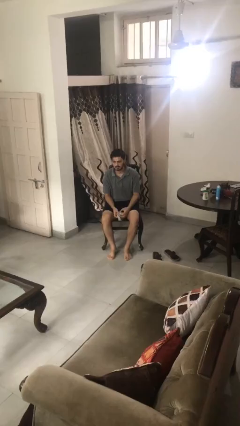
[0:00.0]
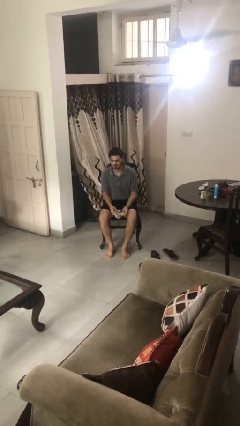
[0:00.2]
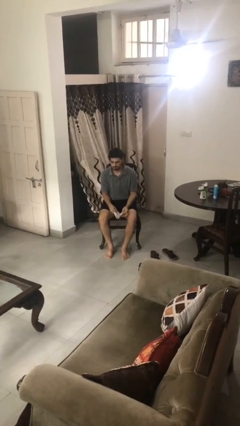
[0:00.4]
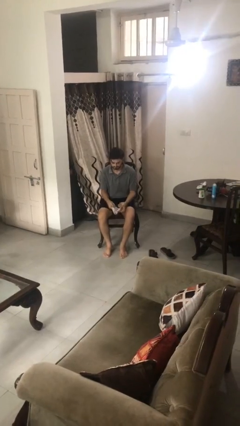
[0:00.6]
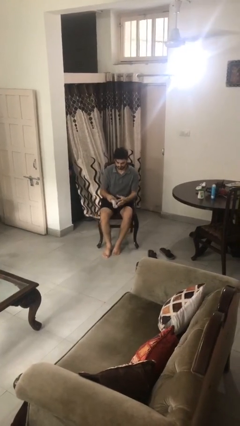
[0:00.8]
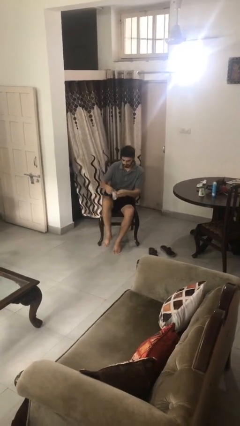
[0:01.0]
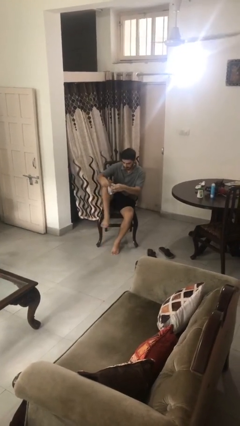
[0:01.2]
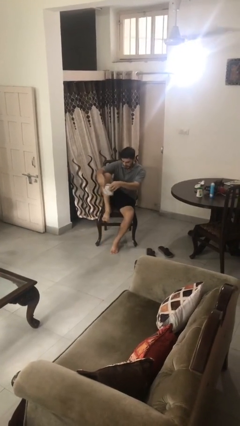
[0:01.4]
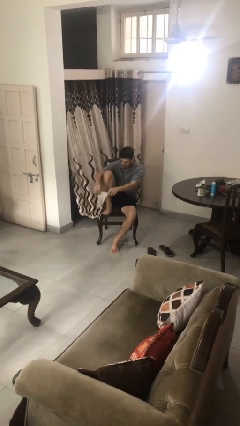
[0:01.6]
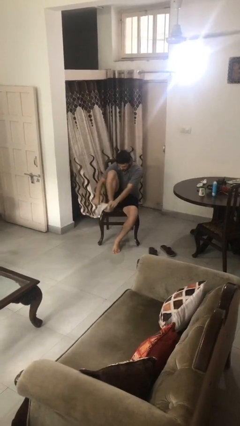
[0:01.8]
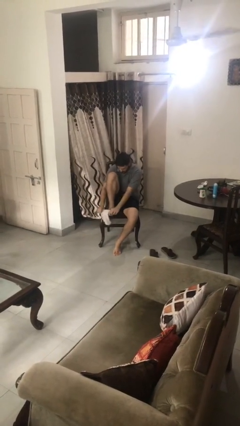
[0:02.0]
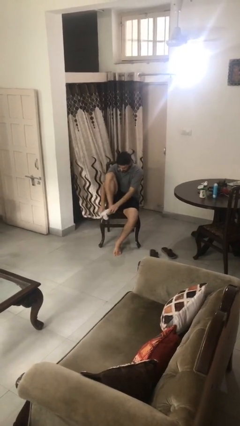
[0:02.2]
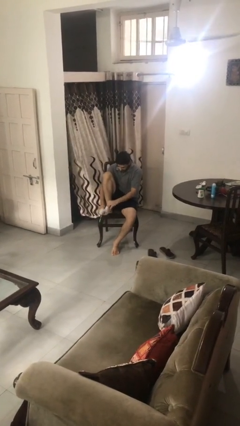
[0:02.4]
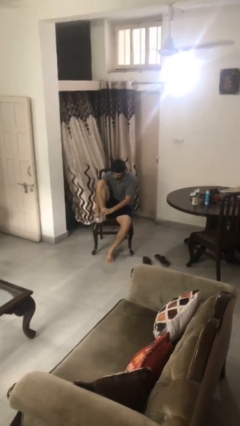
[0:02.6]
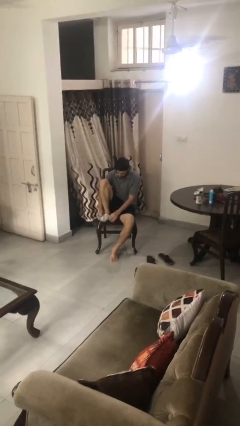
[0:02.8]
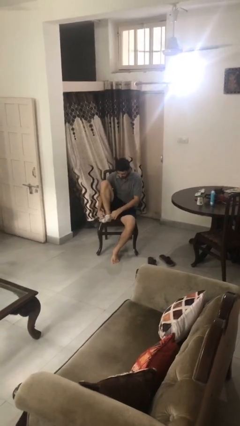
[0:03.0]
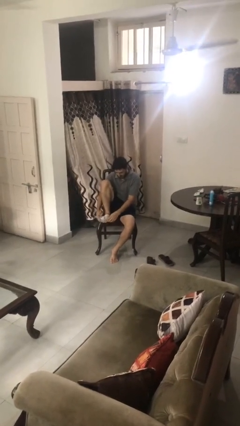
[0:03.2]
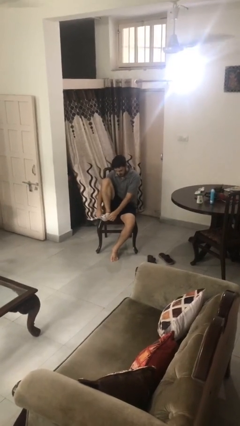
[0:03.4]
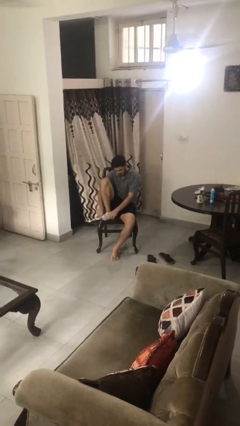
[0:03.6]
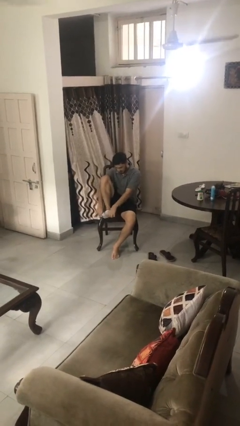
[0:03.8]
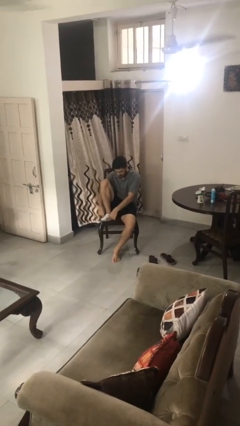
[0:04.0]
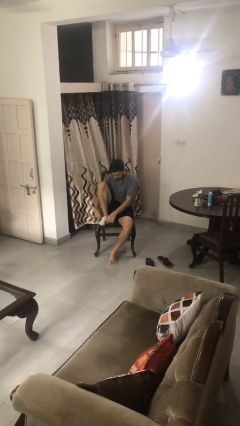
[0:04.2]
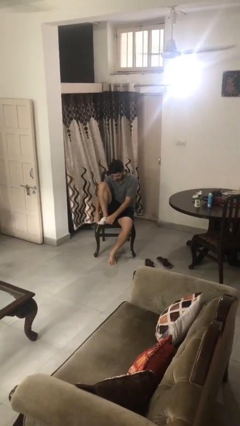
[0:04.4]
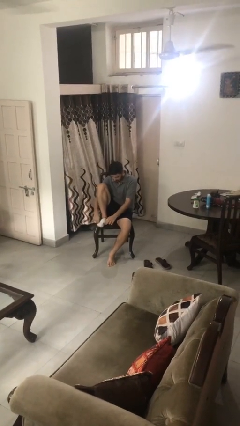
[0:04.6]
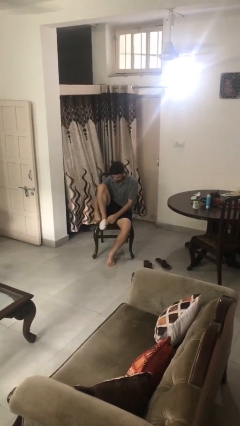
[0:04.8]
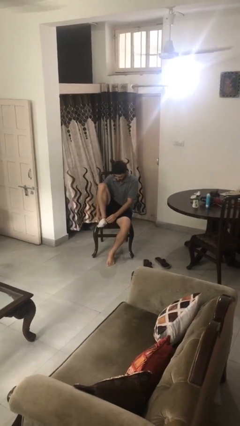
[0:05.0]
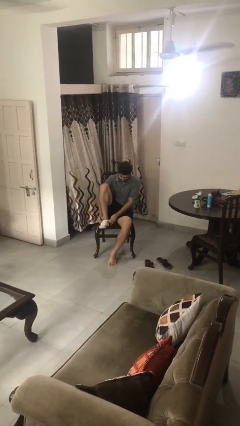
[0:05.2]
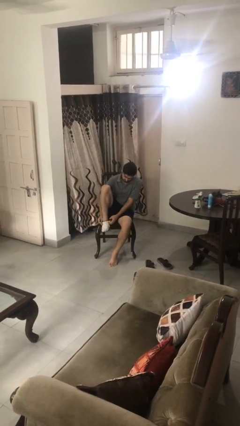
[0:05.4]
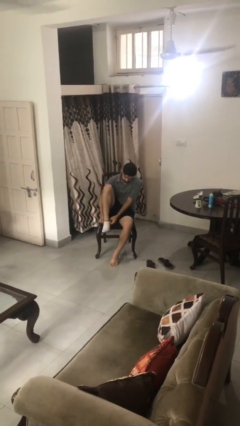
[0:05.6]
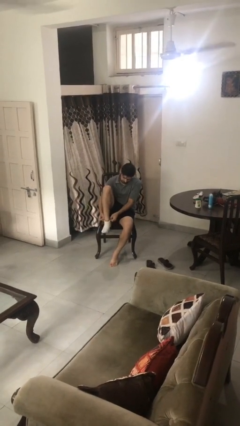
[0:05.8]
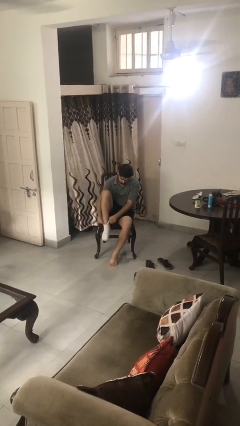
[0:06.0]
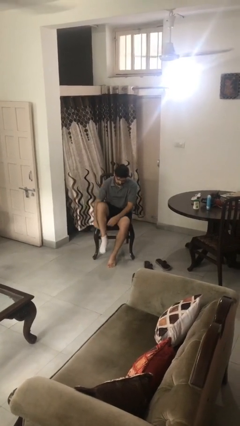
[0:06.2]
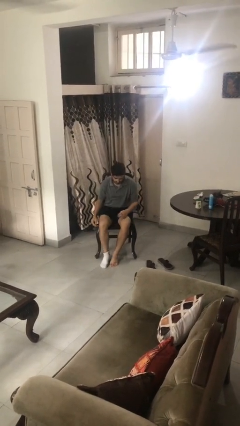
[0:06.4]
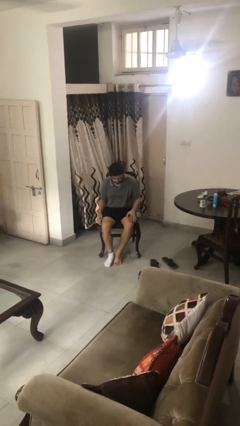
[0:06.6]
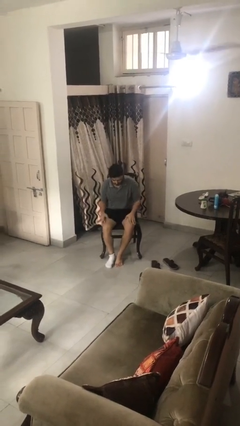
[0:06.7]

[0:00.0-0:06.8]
person puts on socks

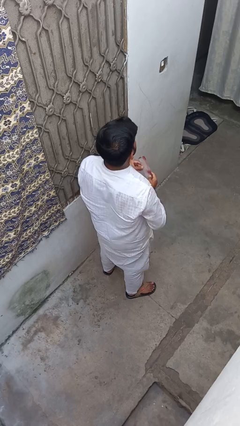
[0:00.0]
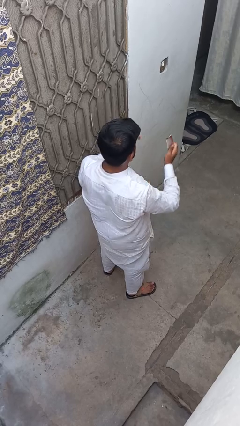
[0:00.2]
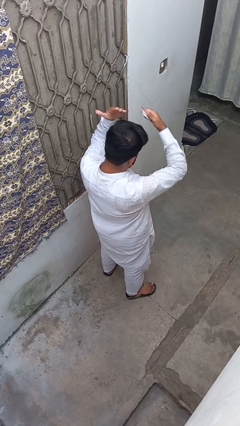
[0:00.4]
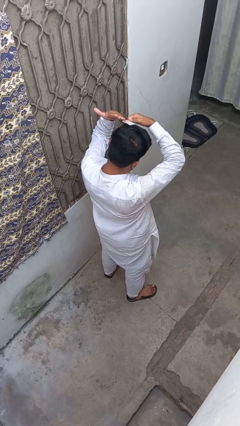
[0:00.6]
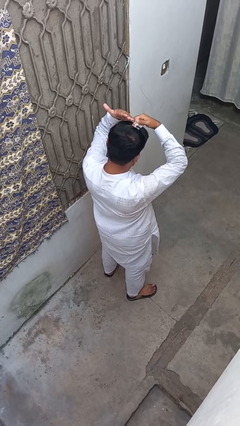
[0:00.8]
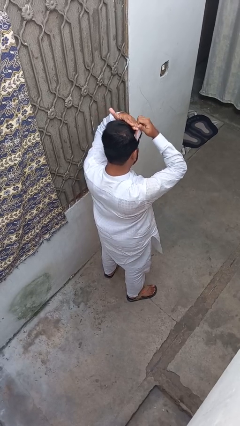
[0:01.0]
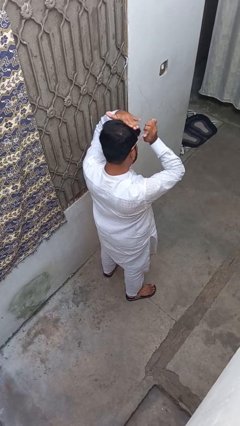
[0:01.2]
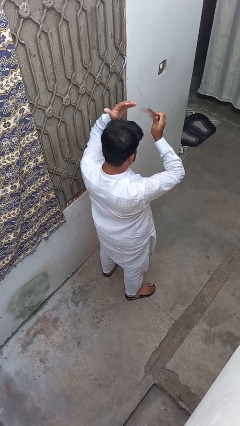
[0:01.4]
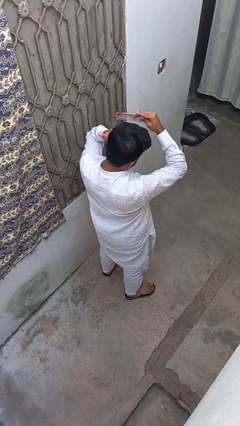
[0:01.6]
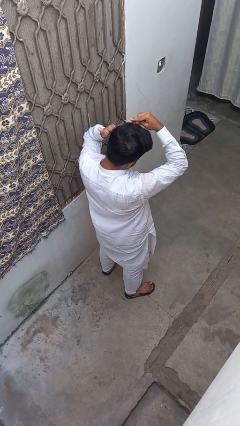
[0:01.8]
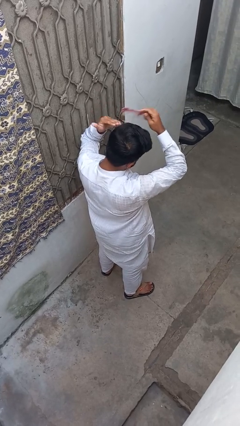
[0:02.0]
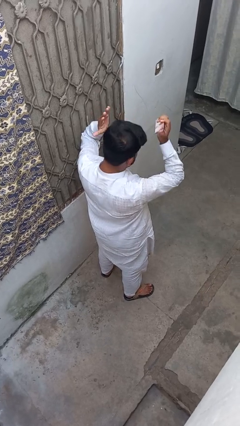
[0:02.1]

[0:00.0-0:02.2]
person brushes hair

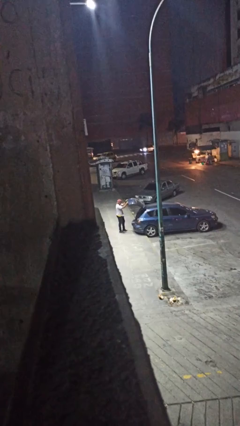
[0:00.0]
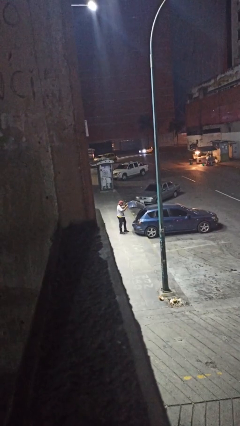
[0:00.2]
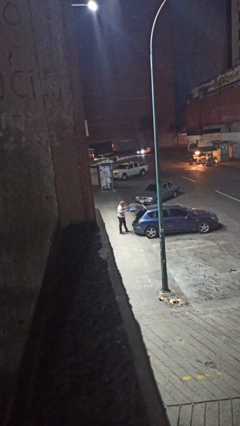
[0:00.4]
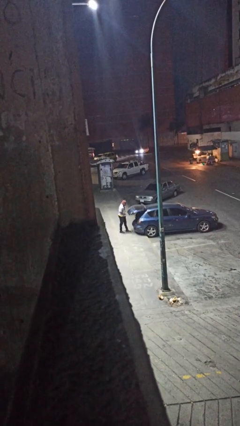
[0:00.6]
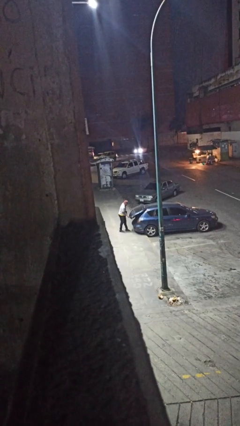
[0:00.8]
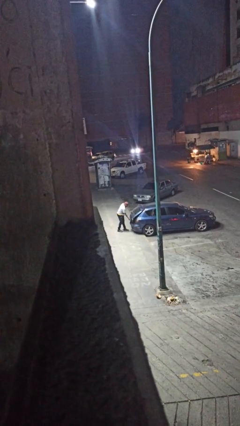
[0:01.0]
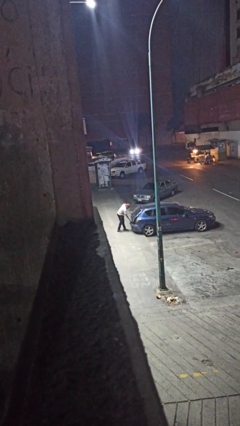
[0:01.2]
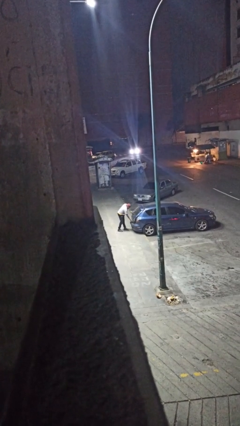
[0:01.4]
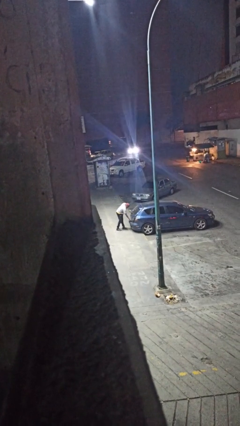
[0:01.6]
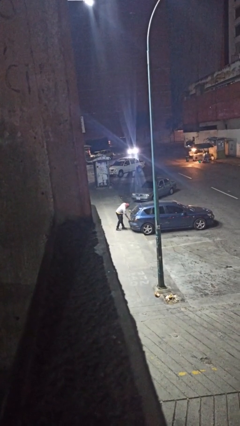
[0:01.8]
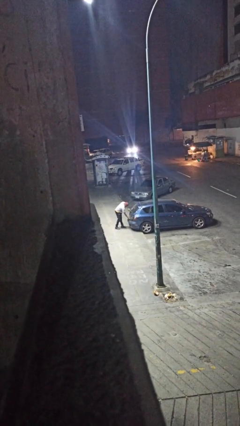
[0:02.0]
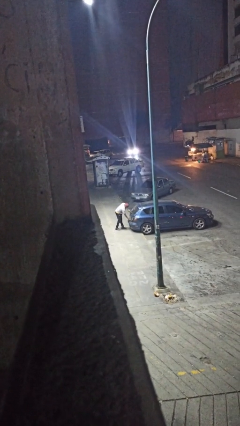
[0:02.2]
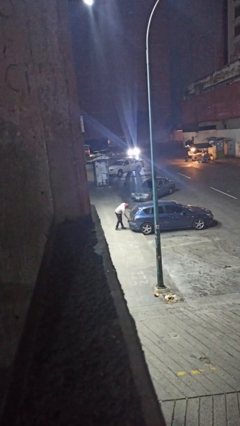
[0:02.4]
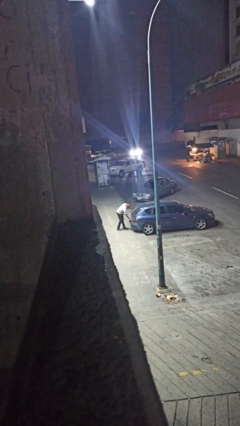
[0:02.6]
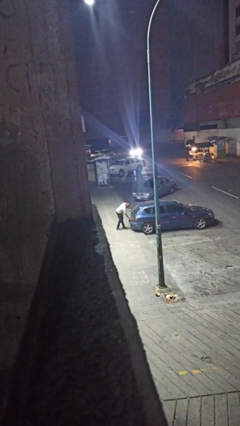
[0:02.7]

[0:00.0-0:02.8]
person closes car trunk

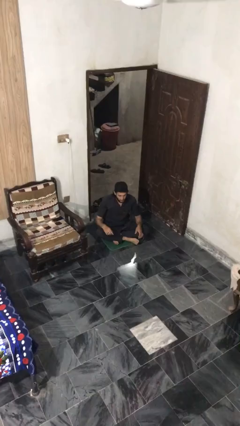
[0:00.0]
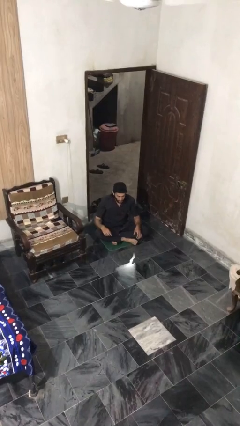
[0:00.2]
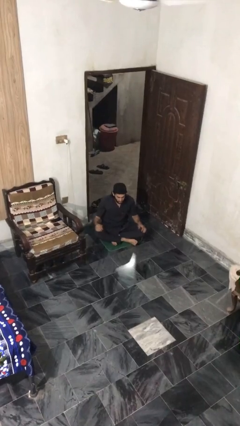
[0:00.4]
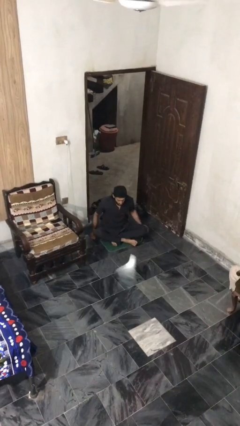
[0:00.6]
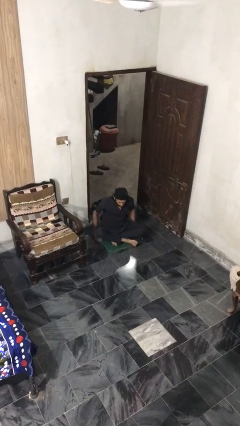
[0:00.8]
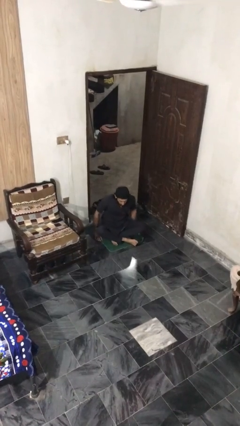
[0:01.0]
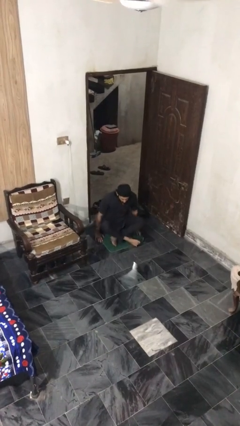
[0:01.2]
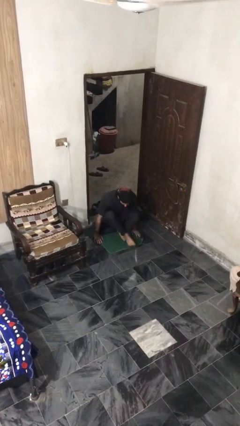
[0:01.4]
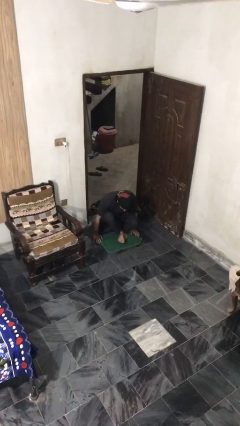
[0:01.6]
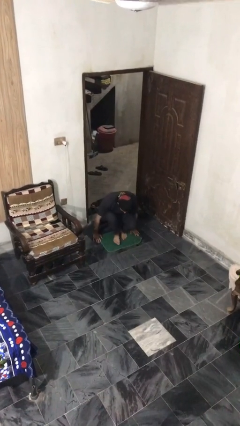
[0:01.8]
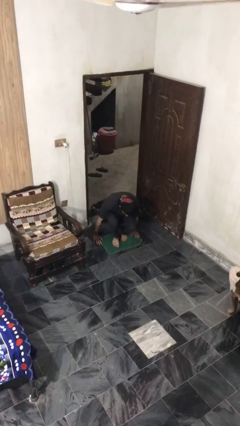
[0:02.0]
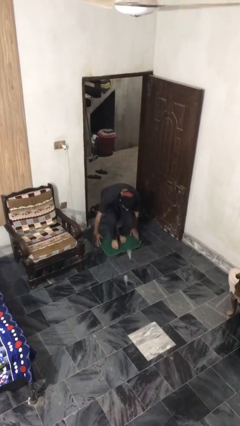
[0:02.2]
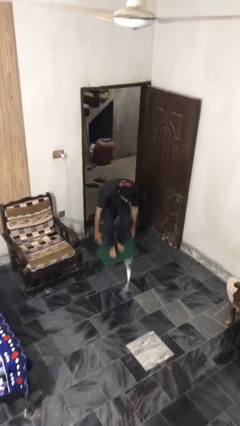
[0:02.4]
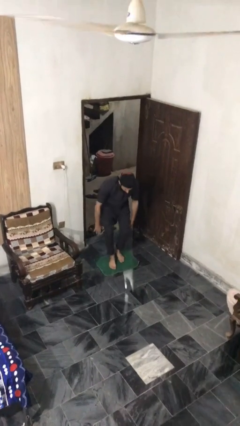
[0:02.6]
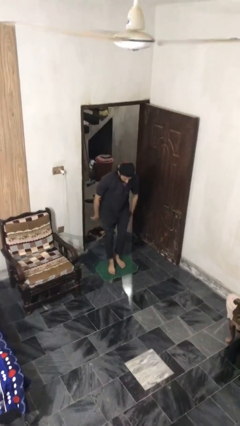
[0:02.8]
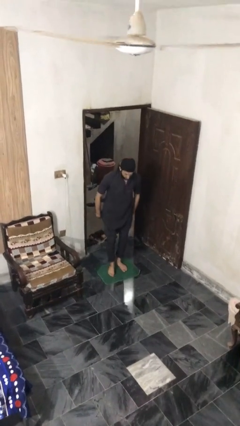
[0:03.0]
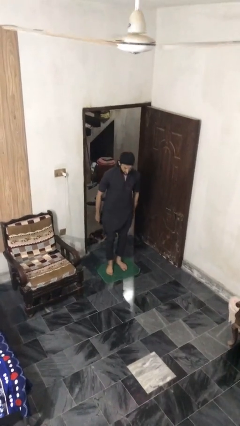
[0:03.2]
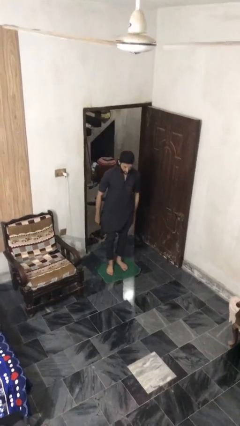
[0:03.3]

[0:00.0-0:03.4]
person stands up from floor

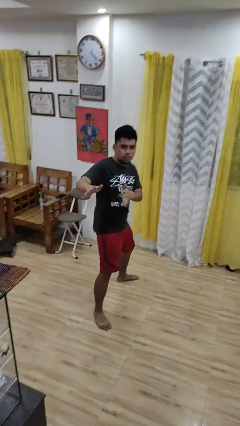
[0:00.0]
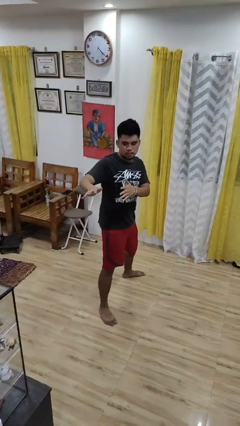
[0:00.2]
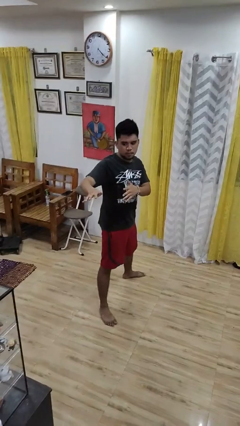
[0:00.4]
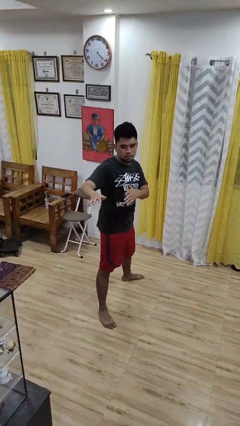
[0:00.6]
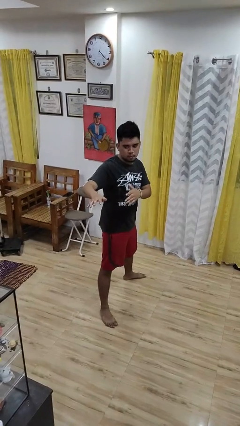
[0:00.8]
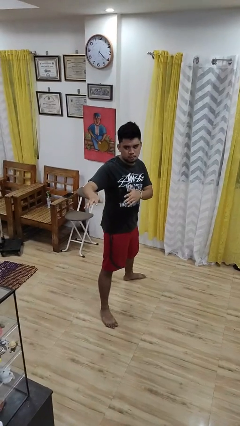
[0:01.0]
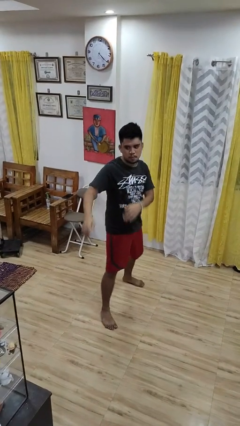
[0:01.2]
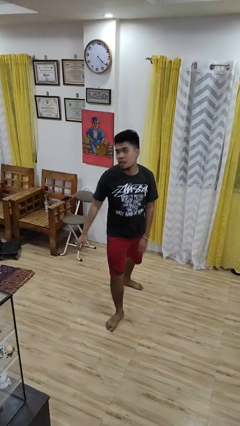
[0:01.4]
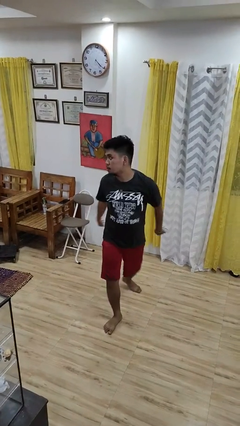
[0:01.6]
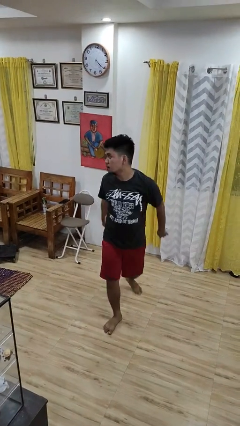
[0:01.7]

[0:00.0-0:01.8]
person karate chop

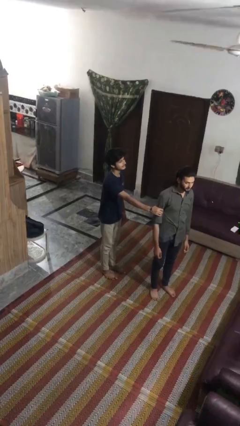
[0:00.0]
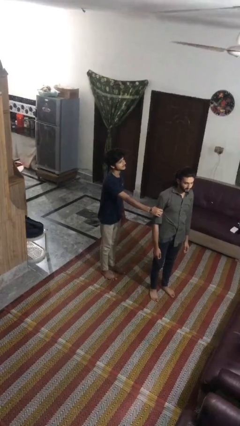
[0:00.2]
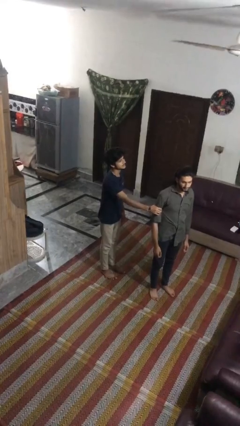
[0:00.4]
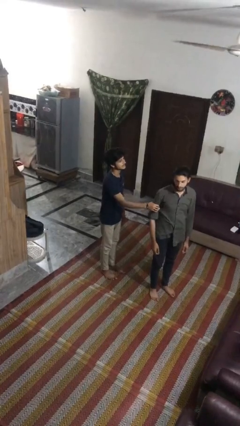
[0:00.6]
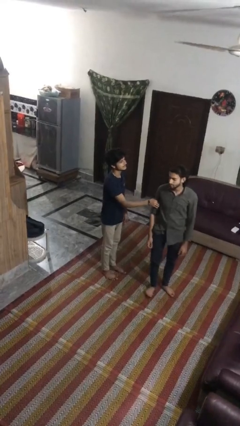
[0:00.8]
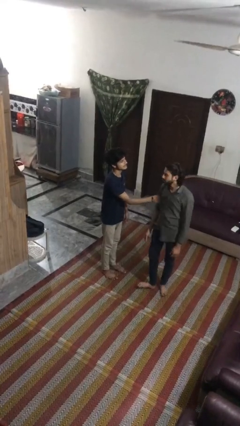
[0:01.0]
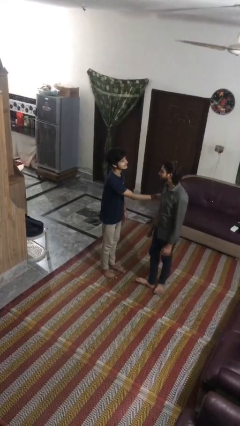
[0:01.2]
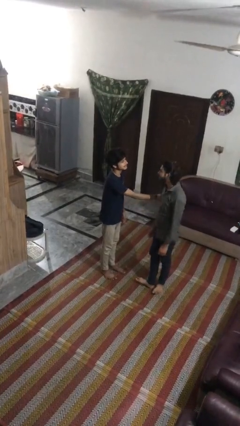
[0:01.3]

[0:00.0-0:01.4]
person spins person around
